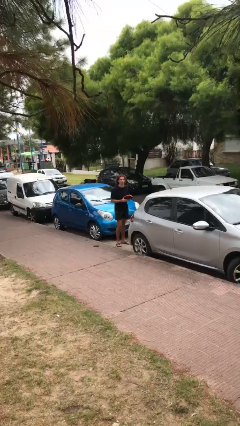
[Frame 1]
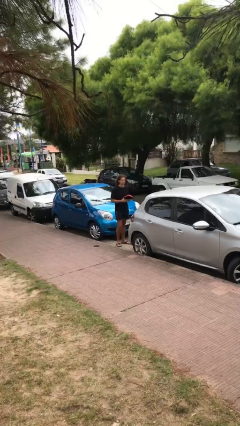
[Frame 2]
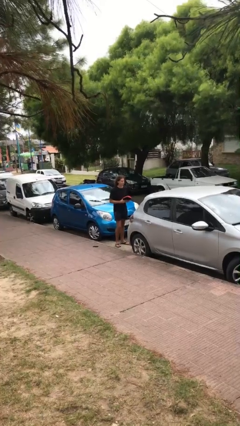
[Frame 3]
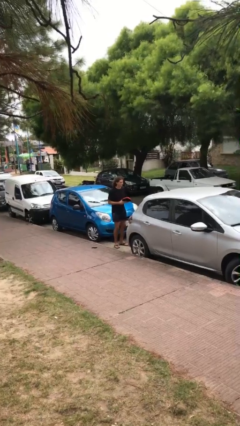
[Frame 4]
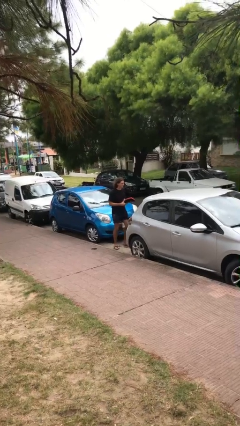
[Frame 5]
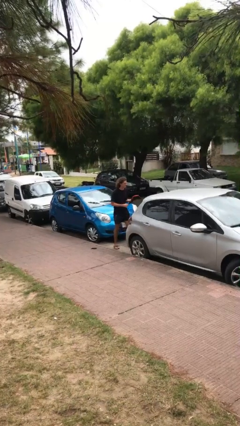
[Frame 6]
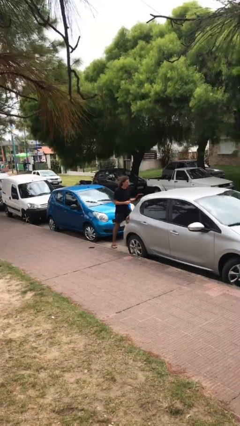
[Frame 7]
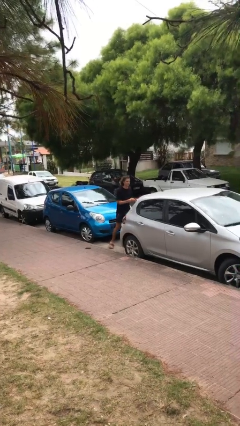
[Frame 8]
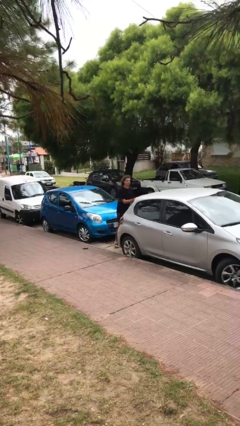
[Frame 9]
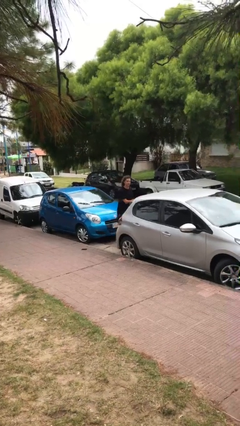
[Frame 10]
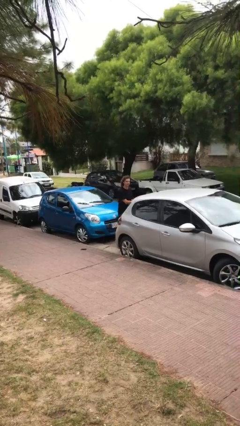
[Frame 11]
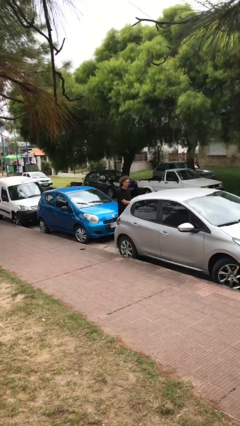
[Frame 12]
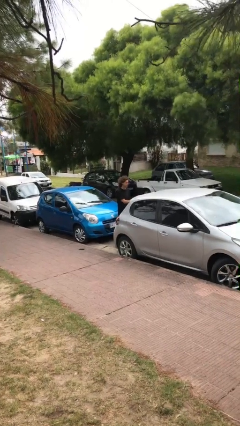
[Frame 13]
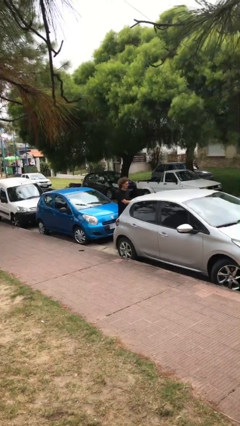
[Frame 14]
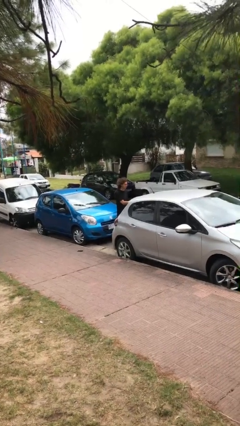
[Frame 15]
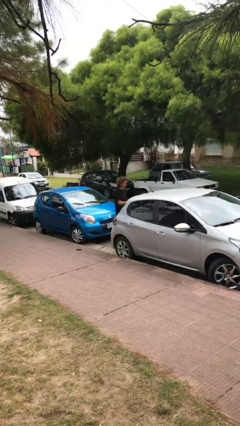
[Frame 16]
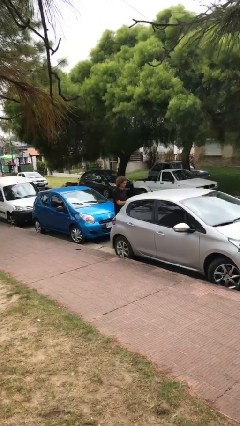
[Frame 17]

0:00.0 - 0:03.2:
person loads car

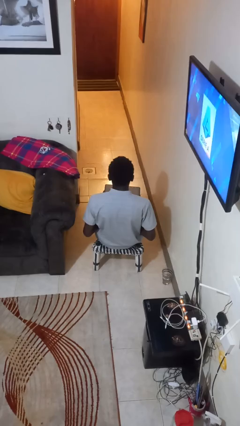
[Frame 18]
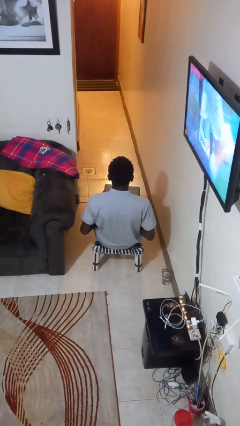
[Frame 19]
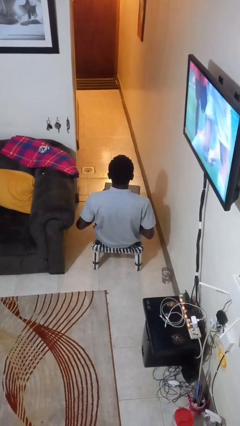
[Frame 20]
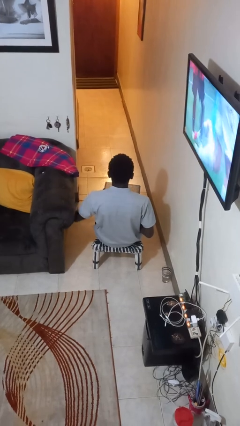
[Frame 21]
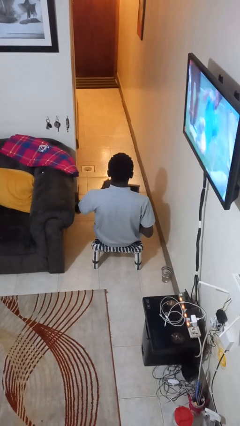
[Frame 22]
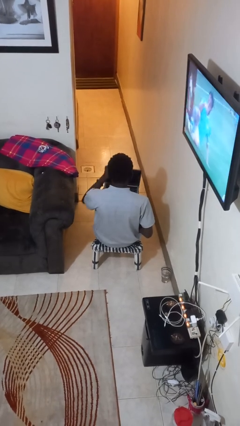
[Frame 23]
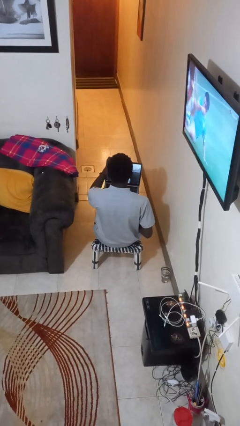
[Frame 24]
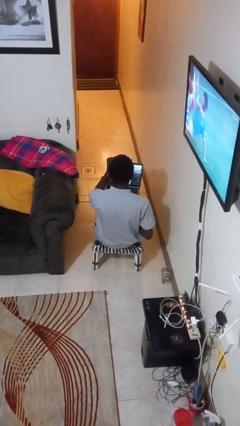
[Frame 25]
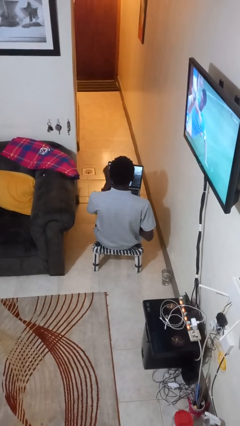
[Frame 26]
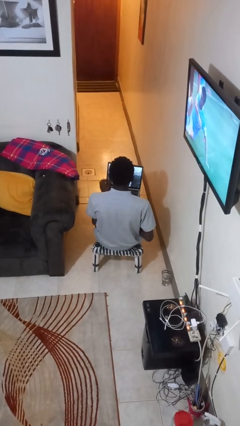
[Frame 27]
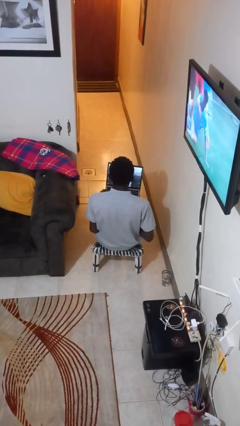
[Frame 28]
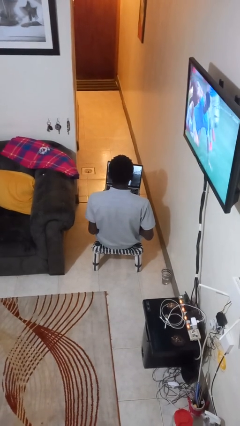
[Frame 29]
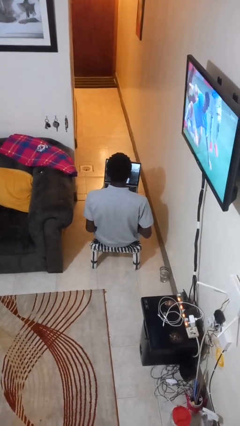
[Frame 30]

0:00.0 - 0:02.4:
person opens laptop

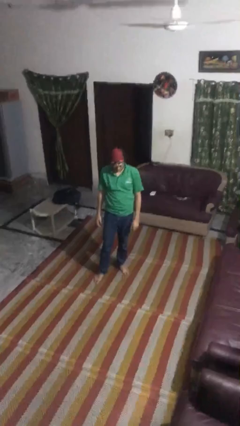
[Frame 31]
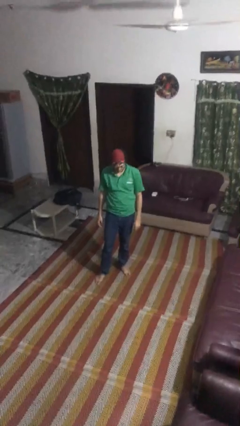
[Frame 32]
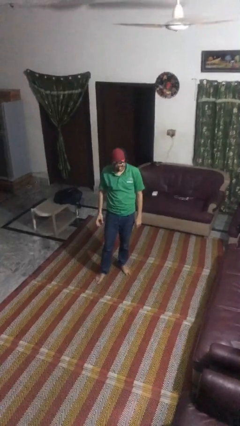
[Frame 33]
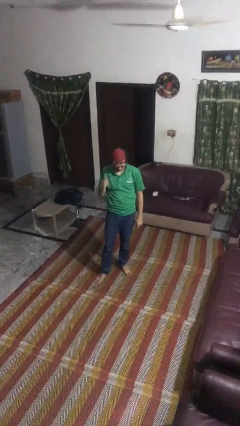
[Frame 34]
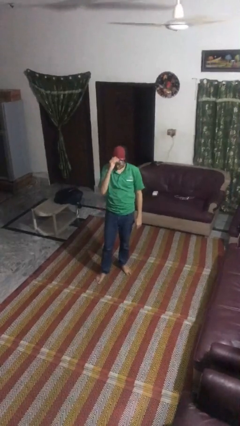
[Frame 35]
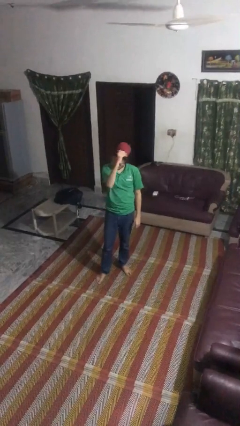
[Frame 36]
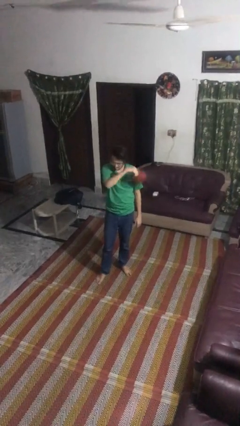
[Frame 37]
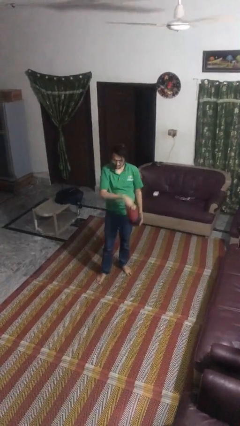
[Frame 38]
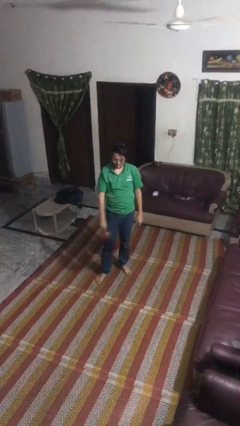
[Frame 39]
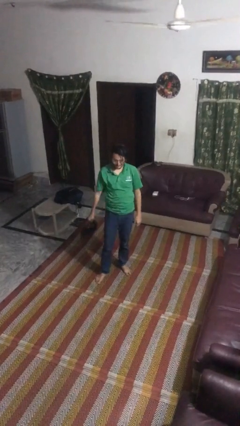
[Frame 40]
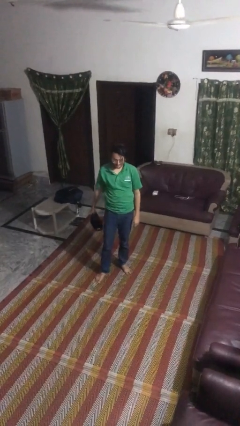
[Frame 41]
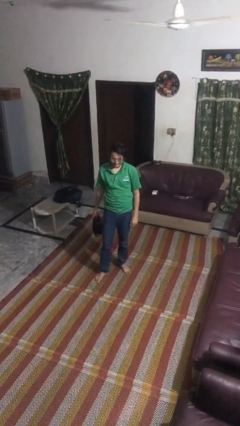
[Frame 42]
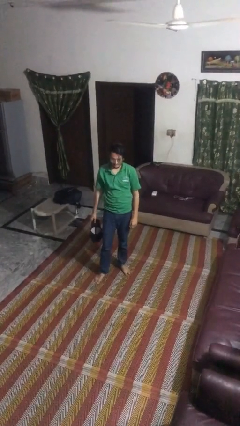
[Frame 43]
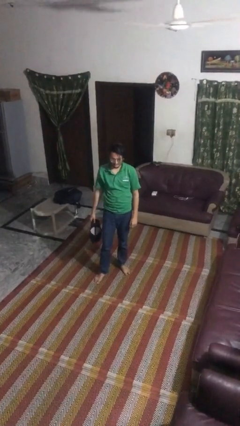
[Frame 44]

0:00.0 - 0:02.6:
person takes off hat

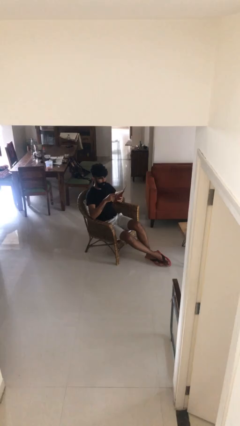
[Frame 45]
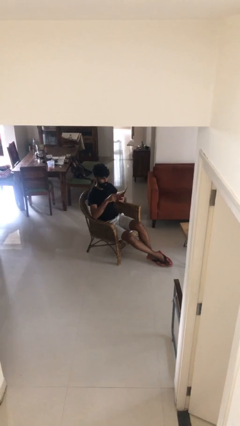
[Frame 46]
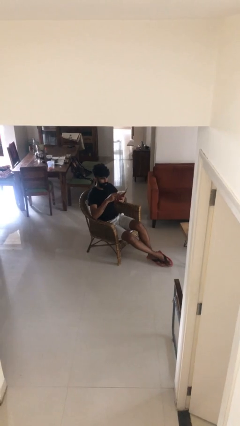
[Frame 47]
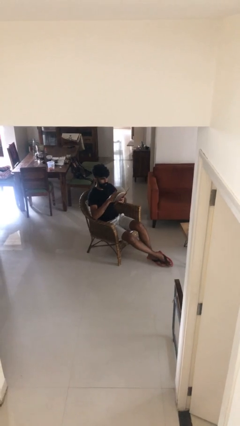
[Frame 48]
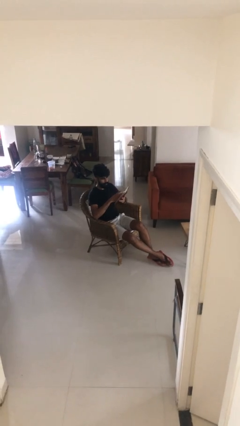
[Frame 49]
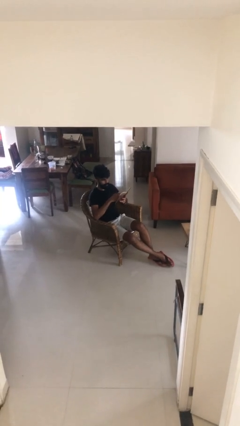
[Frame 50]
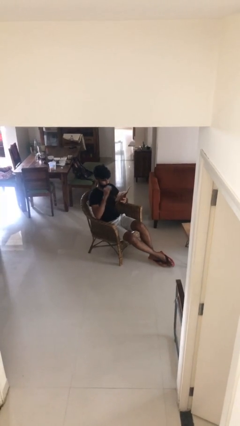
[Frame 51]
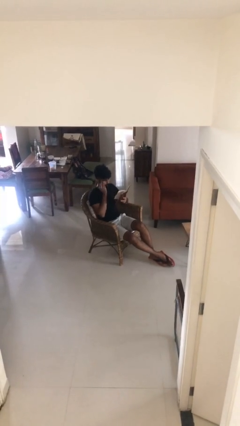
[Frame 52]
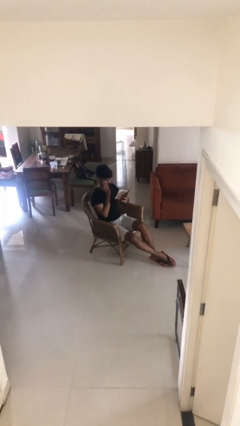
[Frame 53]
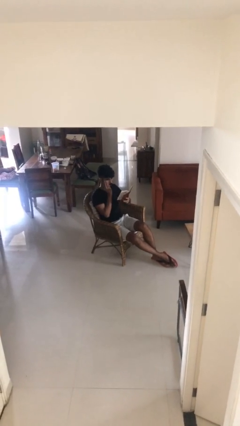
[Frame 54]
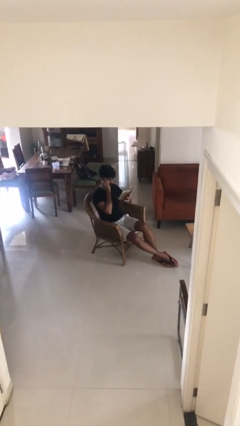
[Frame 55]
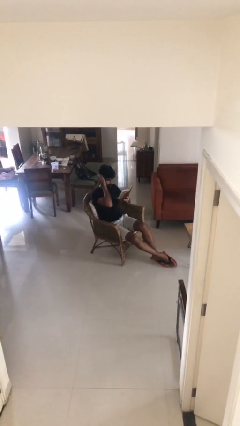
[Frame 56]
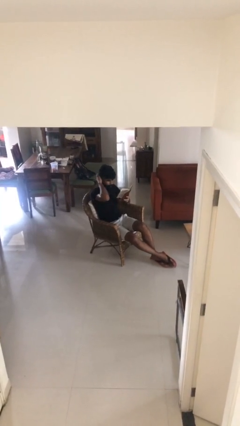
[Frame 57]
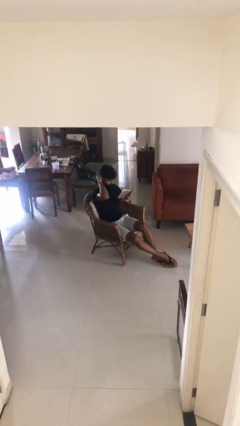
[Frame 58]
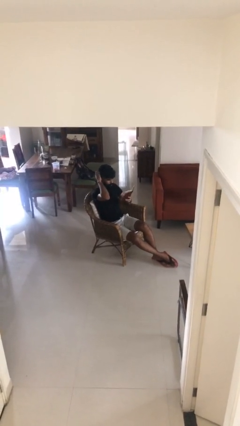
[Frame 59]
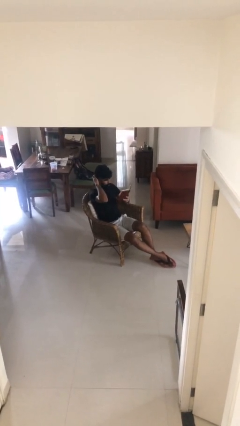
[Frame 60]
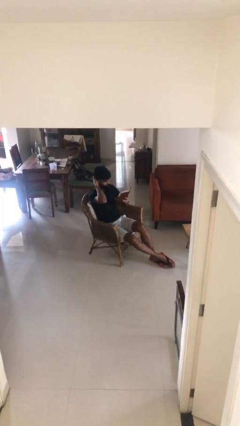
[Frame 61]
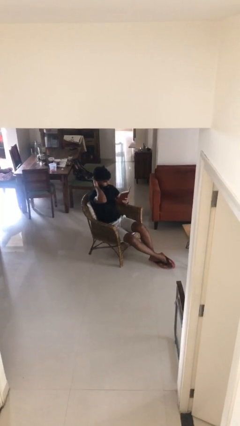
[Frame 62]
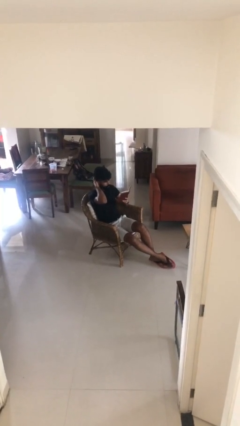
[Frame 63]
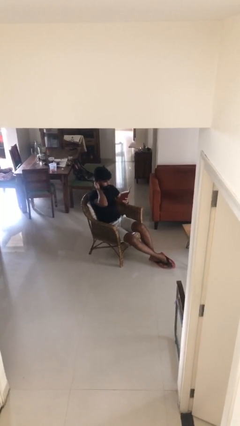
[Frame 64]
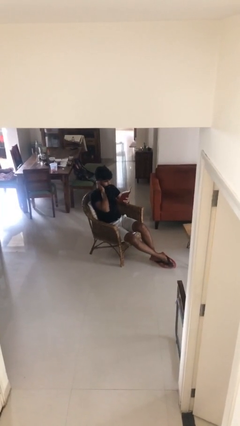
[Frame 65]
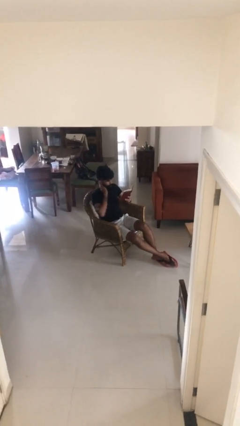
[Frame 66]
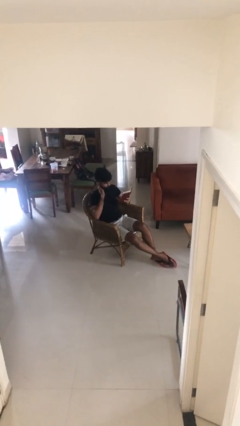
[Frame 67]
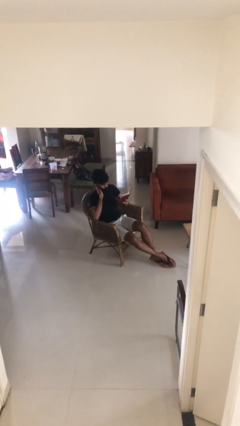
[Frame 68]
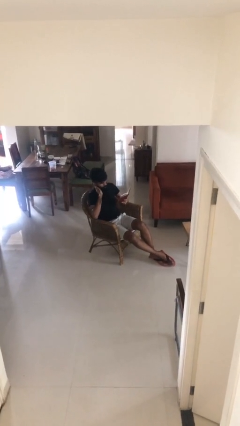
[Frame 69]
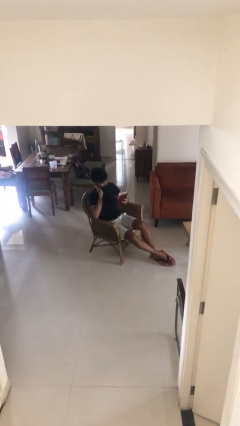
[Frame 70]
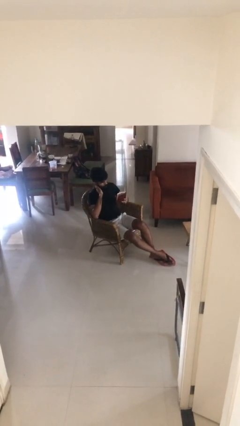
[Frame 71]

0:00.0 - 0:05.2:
person reads document

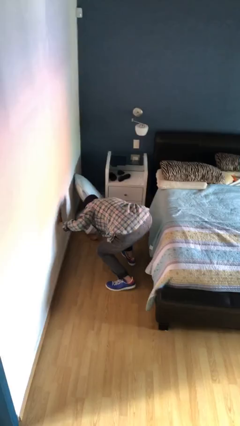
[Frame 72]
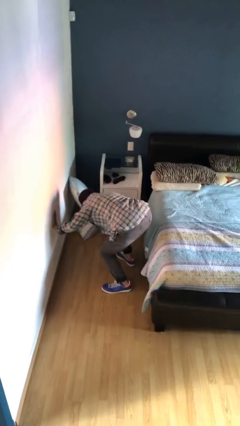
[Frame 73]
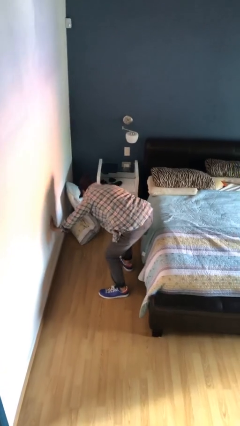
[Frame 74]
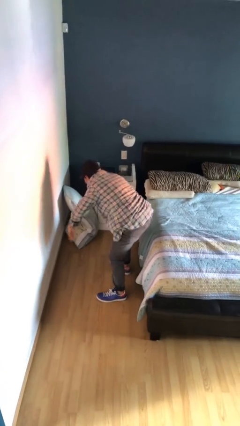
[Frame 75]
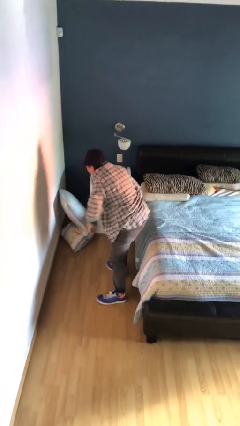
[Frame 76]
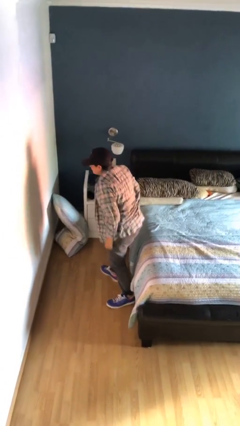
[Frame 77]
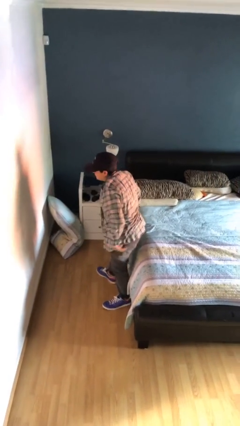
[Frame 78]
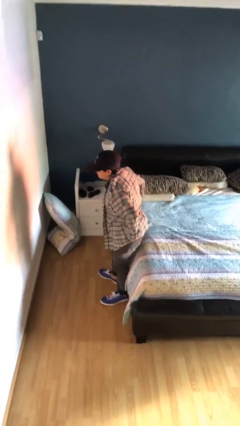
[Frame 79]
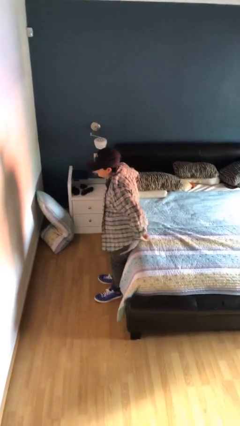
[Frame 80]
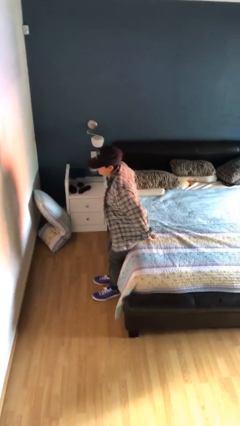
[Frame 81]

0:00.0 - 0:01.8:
person stands up from floor

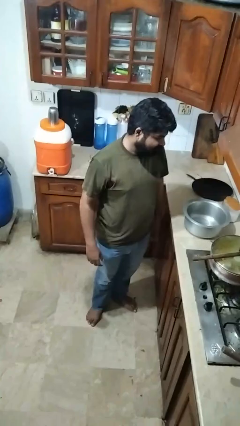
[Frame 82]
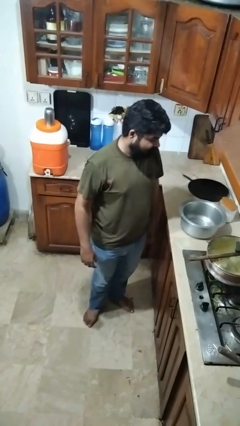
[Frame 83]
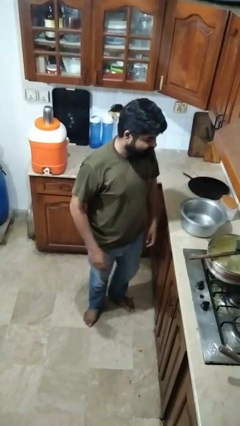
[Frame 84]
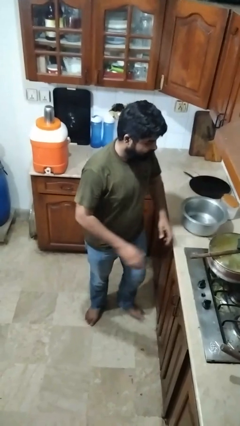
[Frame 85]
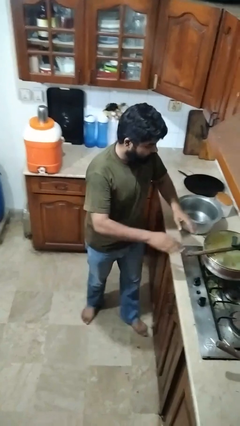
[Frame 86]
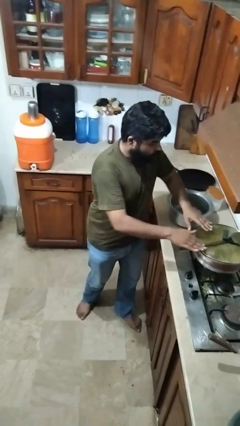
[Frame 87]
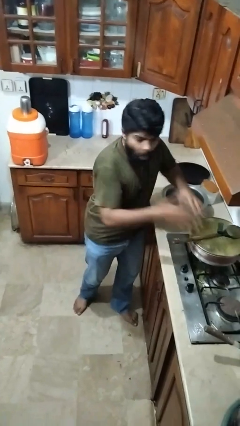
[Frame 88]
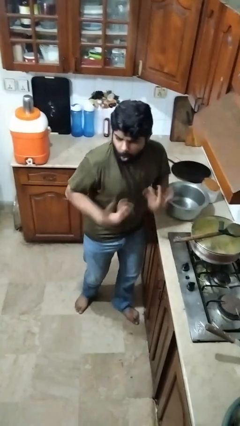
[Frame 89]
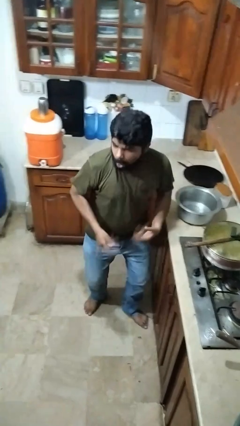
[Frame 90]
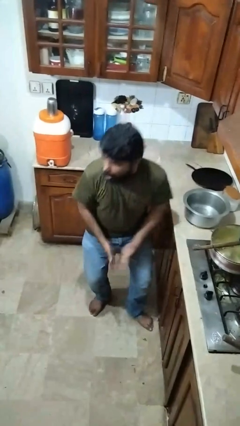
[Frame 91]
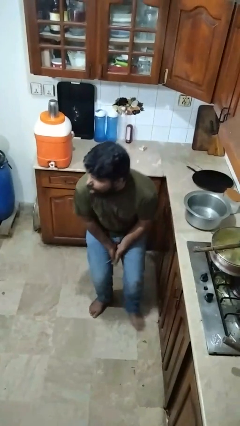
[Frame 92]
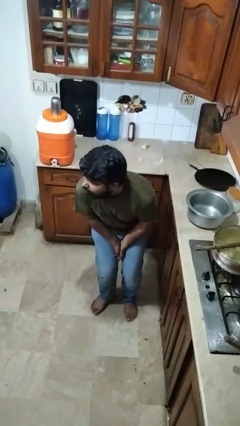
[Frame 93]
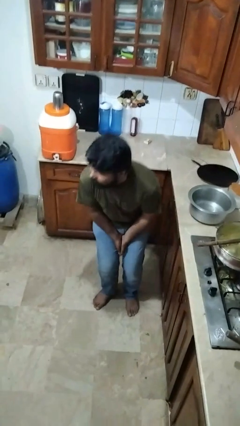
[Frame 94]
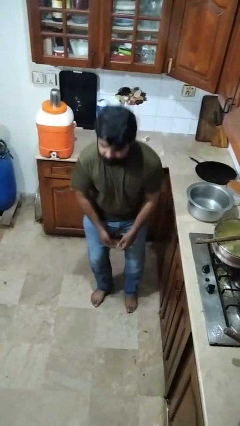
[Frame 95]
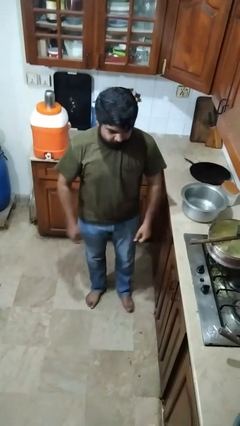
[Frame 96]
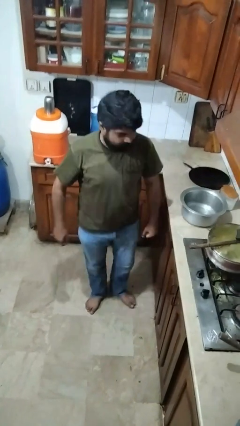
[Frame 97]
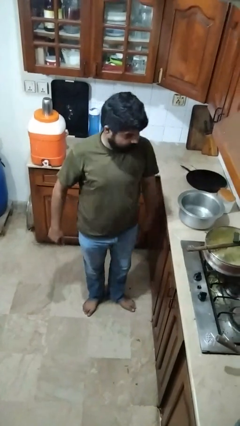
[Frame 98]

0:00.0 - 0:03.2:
person burns hand
